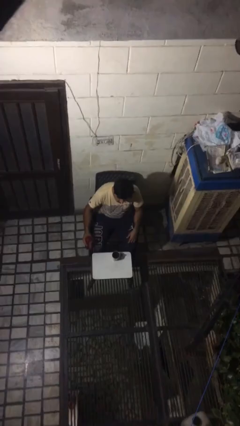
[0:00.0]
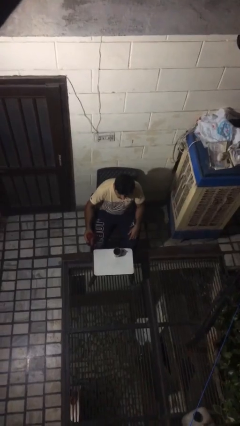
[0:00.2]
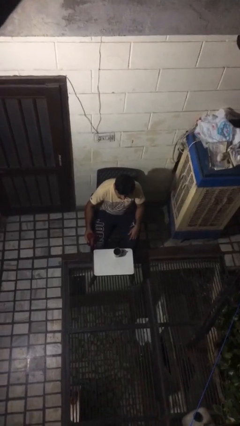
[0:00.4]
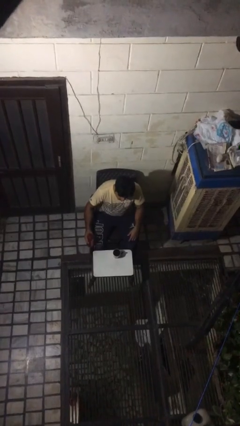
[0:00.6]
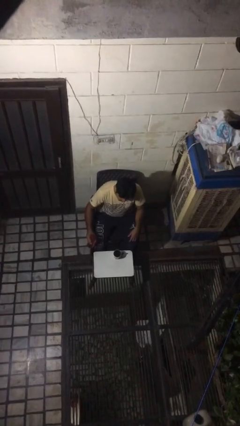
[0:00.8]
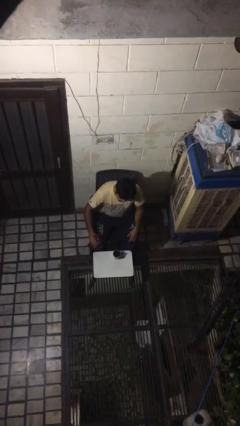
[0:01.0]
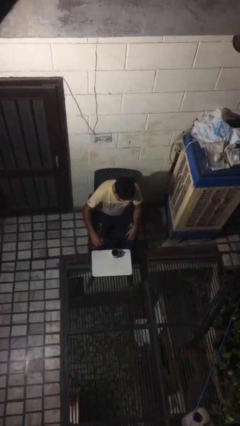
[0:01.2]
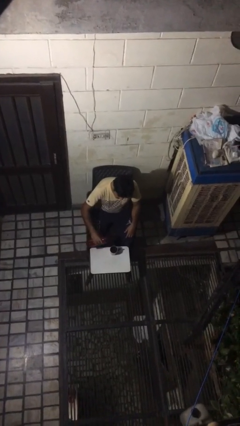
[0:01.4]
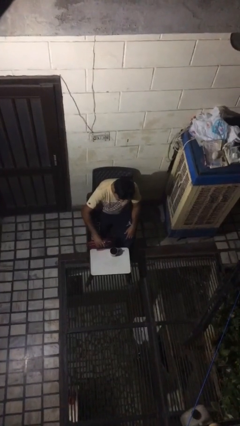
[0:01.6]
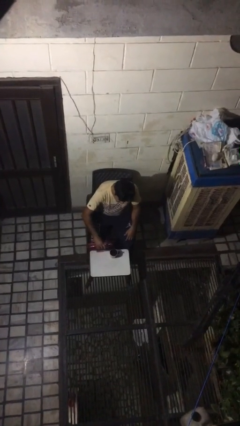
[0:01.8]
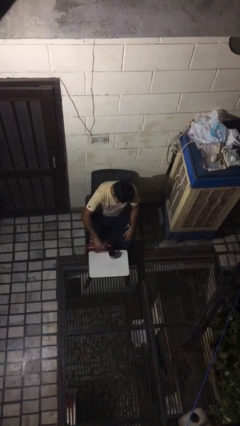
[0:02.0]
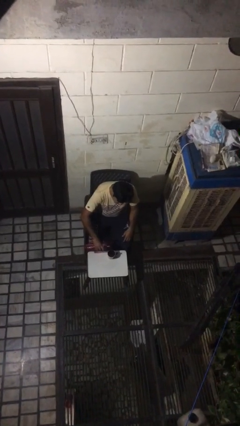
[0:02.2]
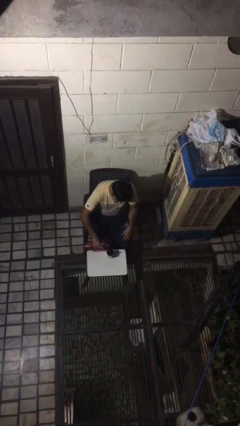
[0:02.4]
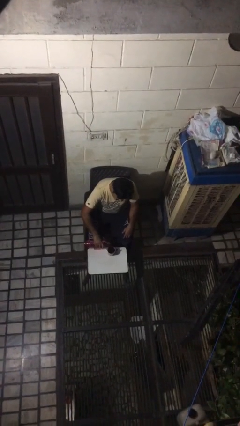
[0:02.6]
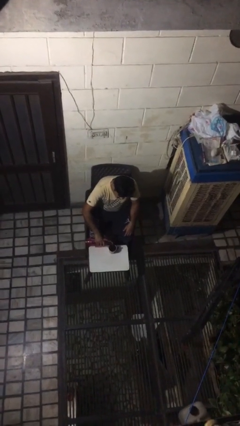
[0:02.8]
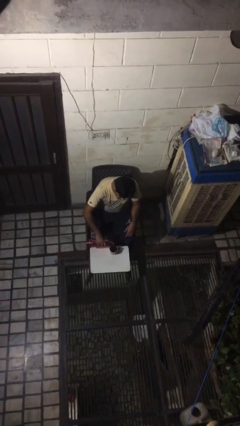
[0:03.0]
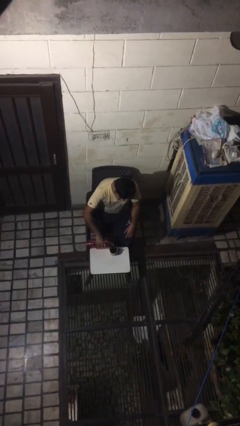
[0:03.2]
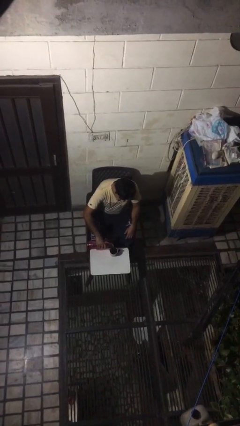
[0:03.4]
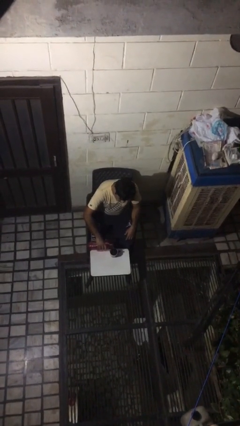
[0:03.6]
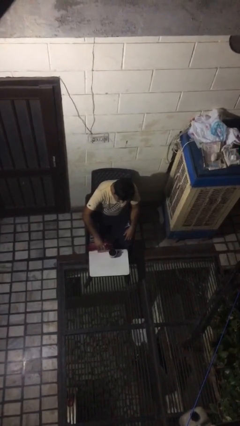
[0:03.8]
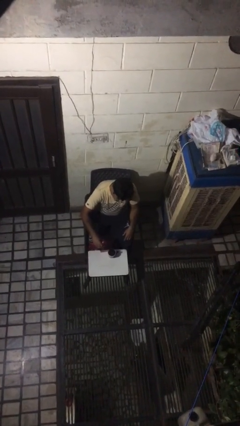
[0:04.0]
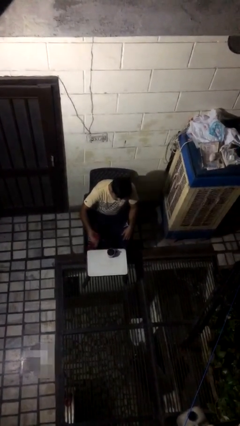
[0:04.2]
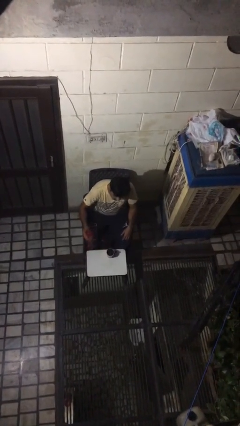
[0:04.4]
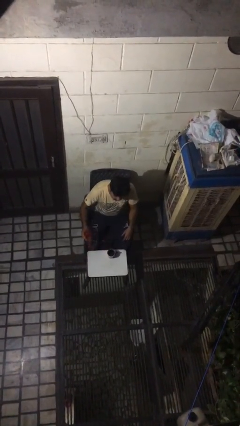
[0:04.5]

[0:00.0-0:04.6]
person pours liquid into cup

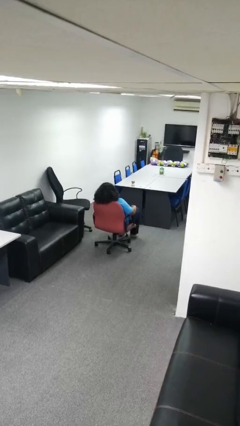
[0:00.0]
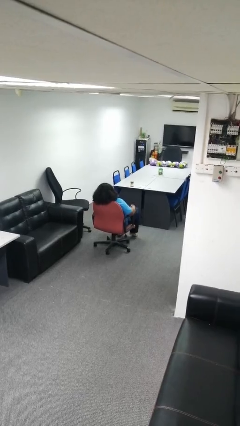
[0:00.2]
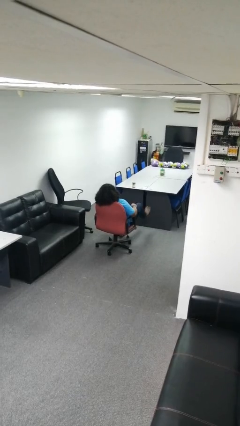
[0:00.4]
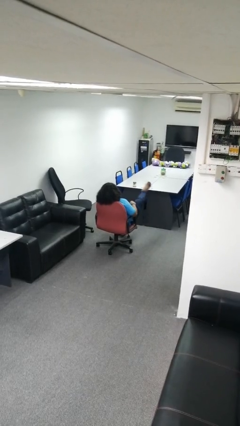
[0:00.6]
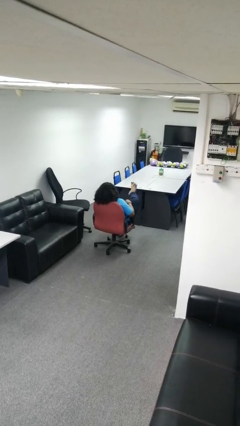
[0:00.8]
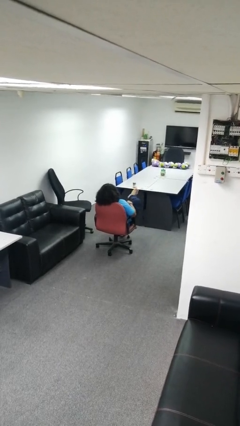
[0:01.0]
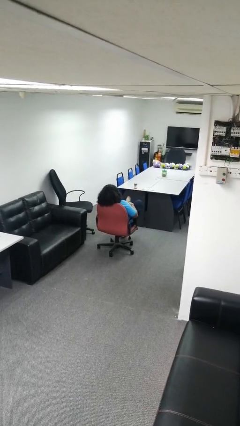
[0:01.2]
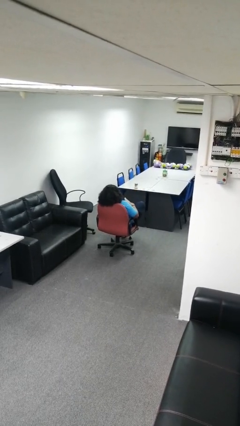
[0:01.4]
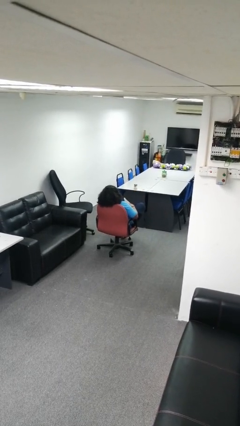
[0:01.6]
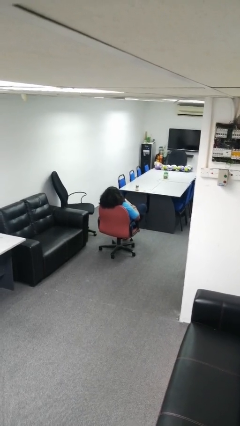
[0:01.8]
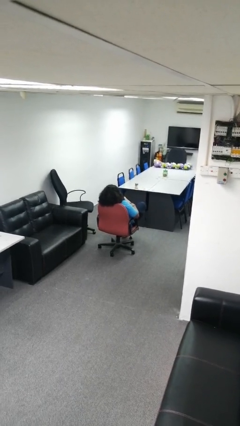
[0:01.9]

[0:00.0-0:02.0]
person crosses legs

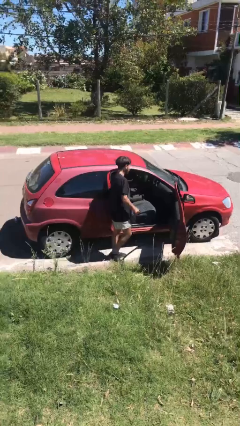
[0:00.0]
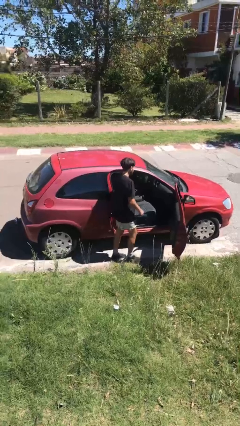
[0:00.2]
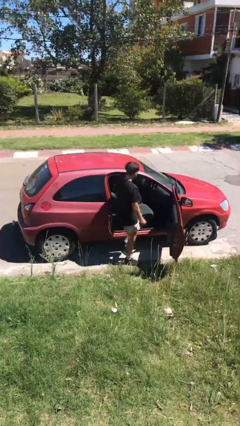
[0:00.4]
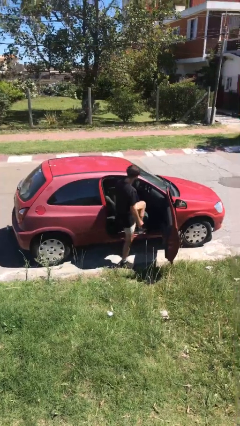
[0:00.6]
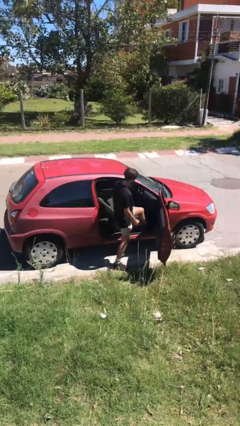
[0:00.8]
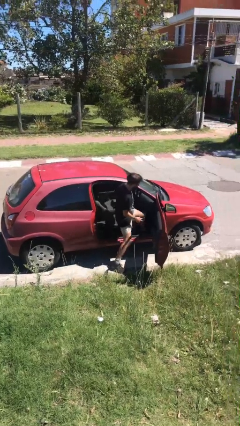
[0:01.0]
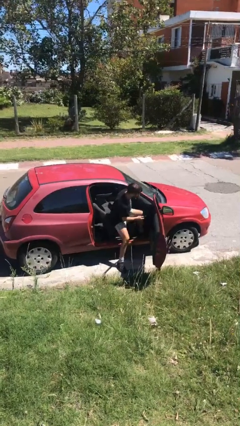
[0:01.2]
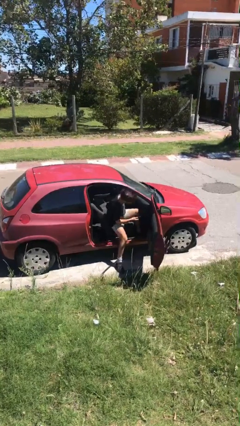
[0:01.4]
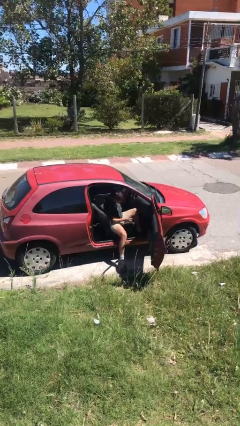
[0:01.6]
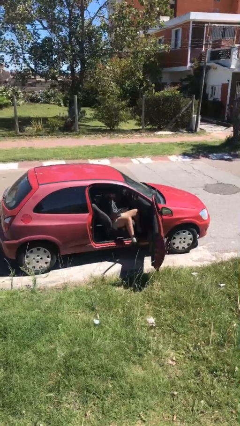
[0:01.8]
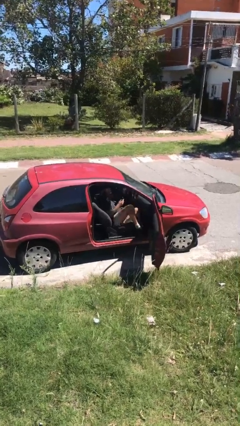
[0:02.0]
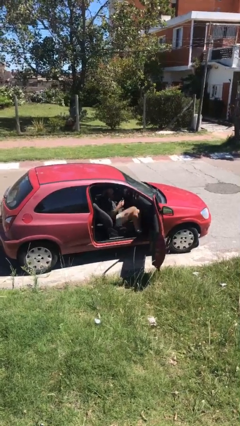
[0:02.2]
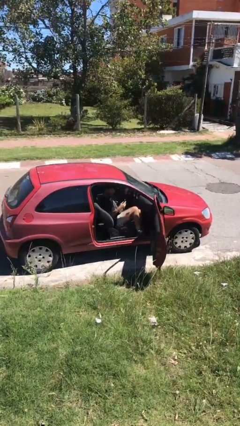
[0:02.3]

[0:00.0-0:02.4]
person enters car

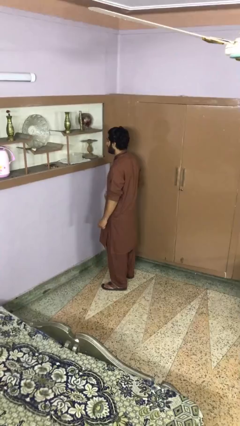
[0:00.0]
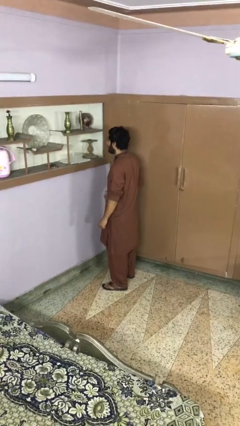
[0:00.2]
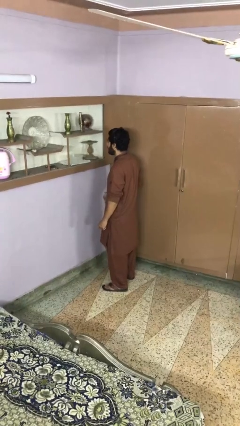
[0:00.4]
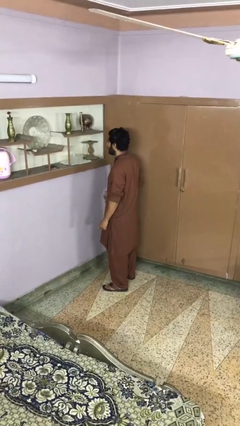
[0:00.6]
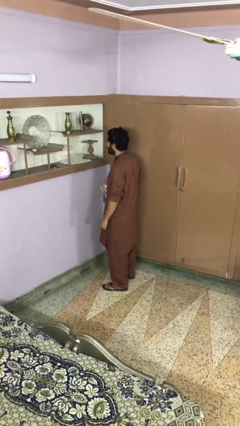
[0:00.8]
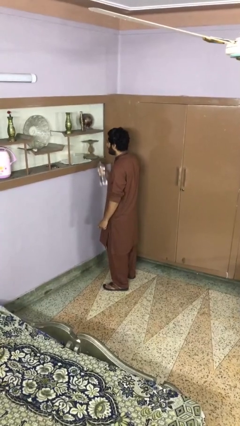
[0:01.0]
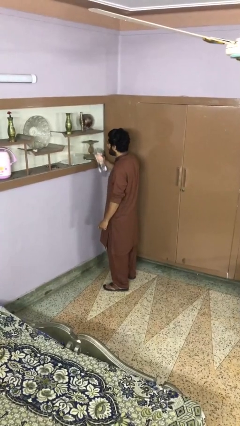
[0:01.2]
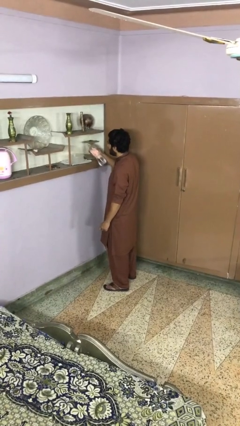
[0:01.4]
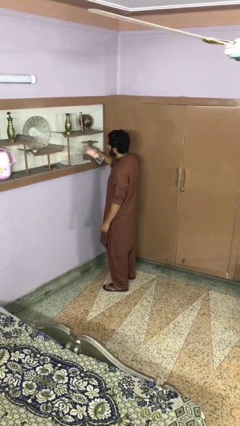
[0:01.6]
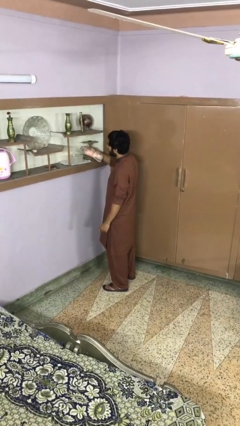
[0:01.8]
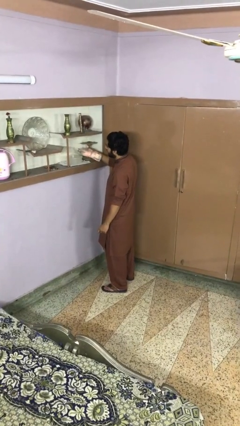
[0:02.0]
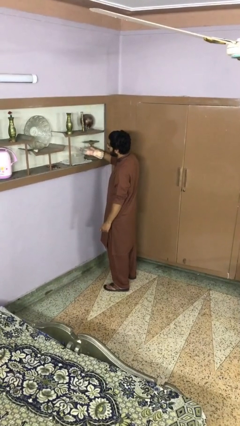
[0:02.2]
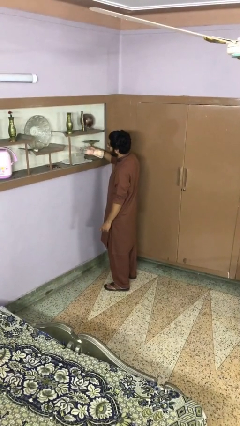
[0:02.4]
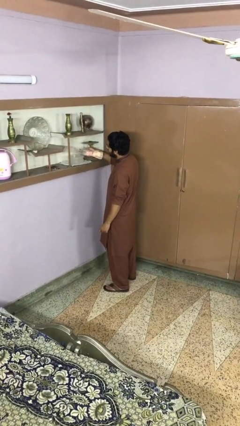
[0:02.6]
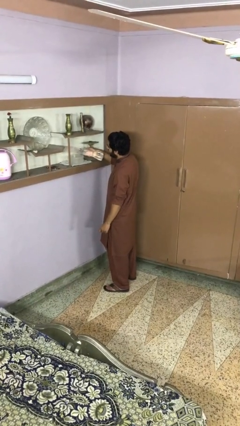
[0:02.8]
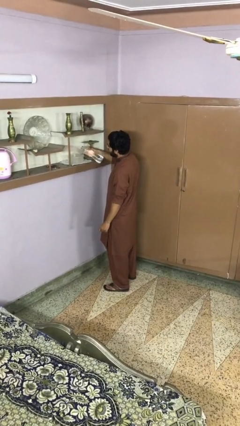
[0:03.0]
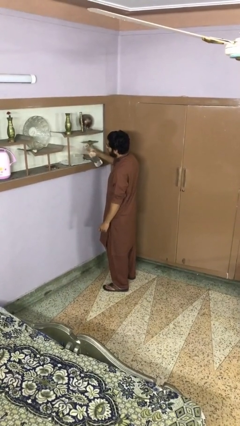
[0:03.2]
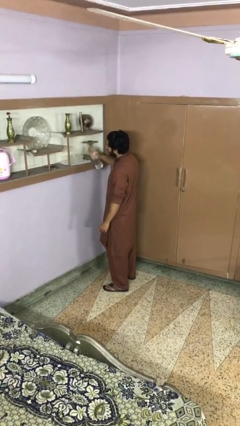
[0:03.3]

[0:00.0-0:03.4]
person pours into bowl

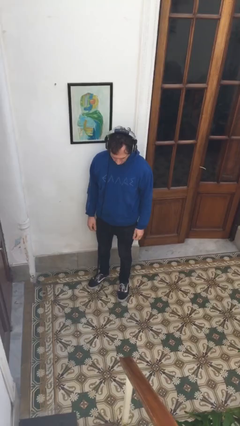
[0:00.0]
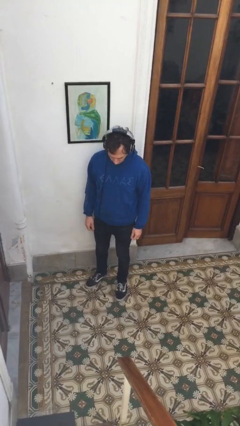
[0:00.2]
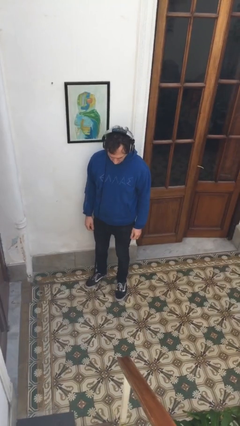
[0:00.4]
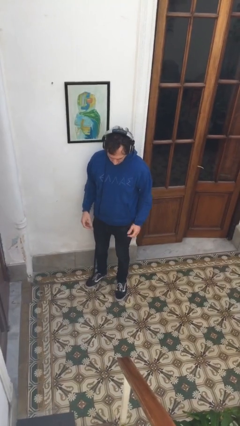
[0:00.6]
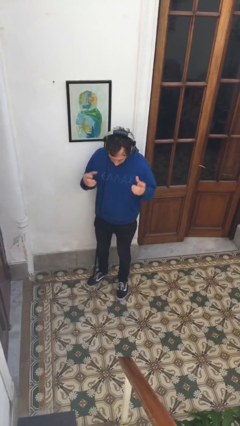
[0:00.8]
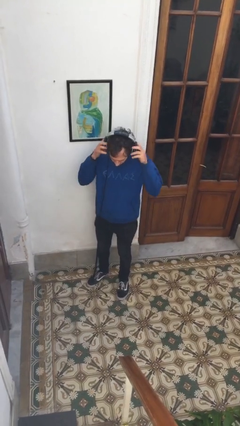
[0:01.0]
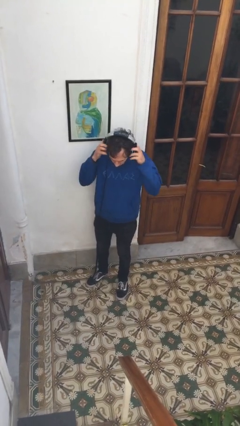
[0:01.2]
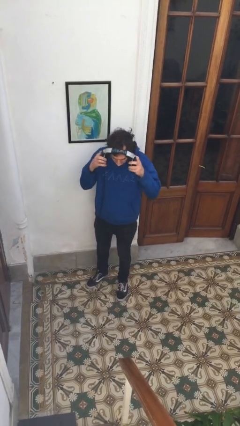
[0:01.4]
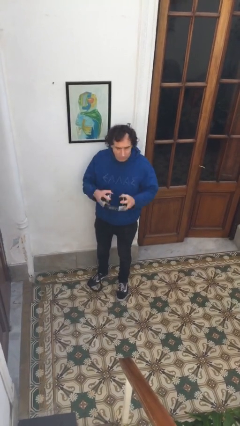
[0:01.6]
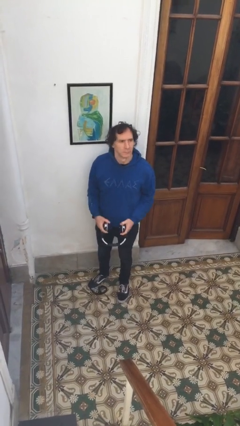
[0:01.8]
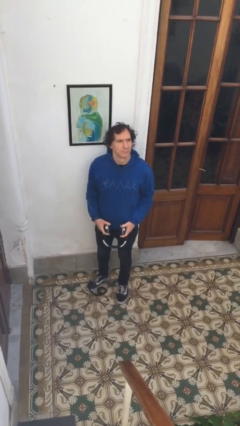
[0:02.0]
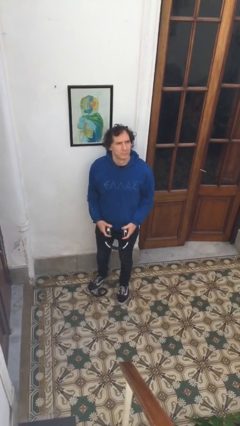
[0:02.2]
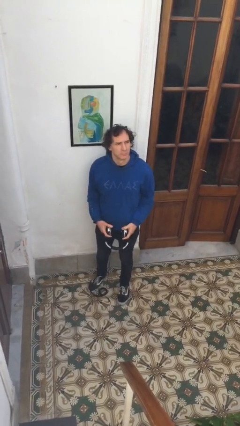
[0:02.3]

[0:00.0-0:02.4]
person takes off headphones

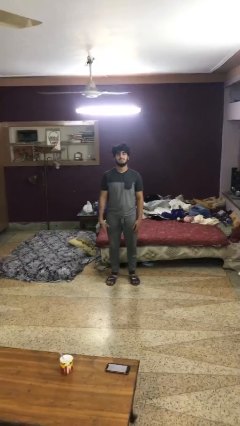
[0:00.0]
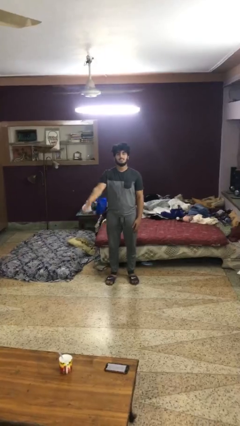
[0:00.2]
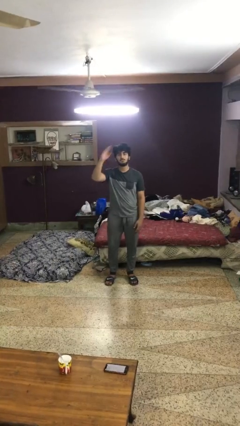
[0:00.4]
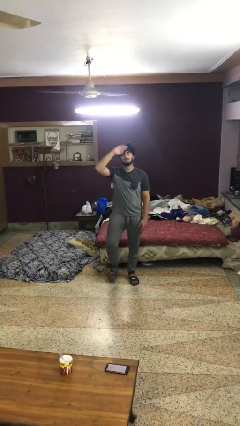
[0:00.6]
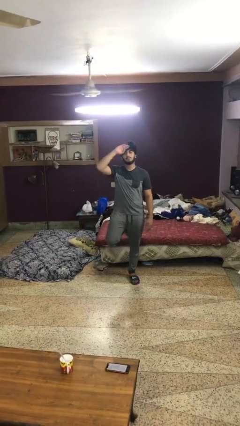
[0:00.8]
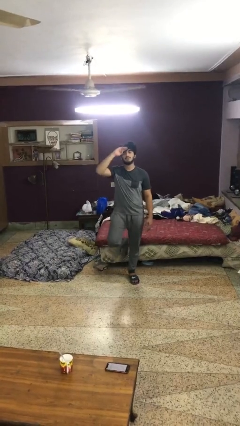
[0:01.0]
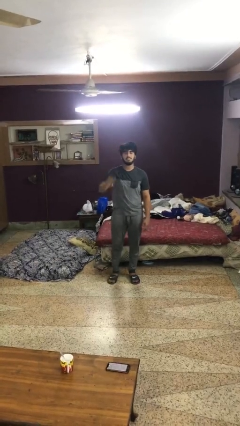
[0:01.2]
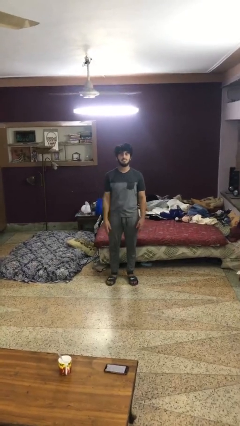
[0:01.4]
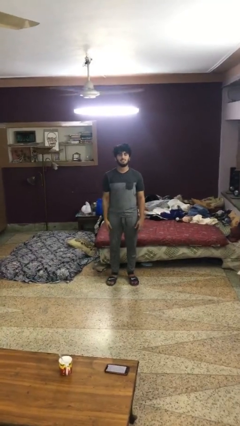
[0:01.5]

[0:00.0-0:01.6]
person salutes

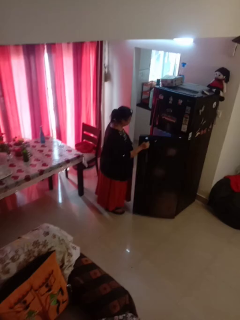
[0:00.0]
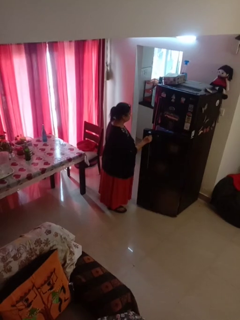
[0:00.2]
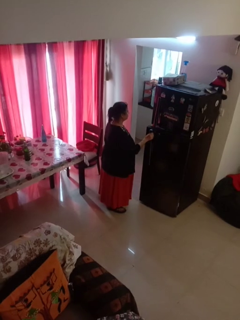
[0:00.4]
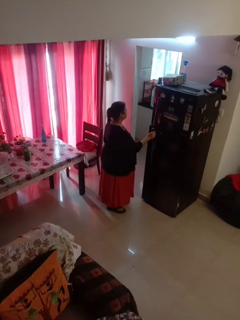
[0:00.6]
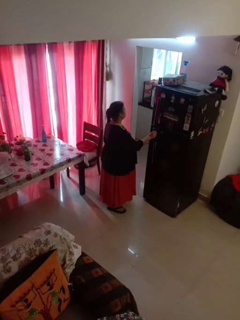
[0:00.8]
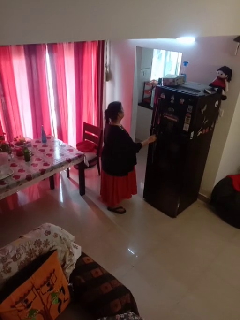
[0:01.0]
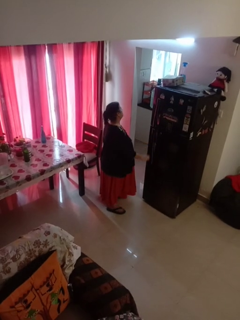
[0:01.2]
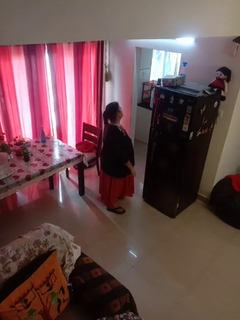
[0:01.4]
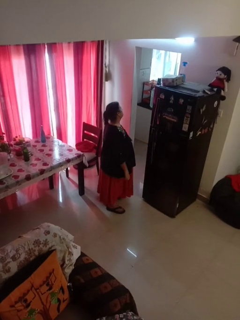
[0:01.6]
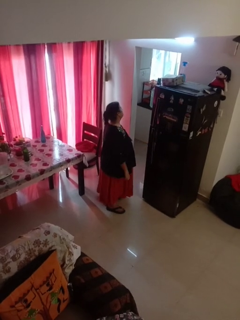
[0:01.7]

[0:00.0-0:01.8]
person closes refrigerator
